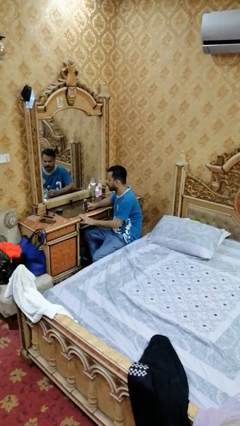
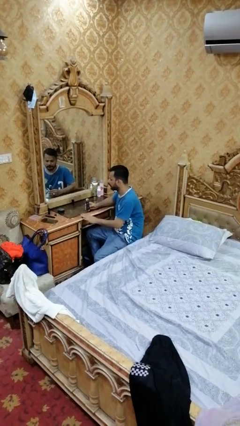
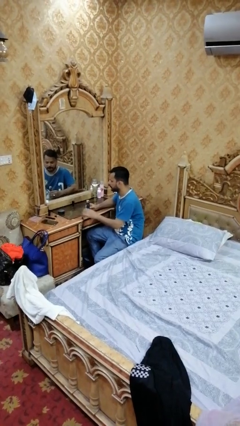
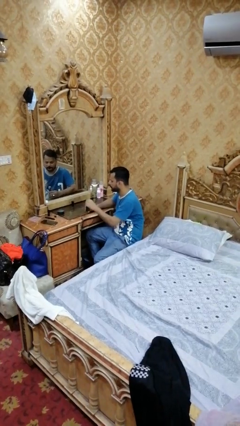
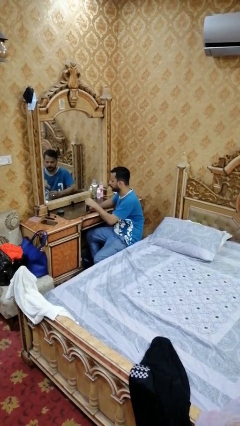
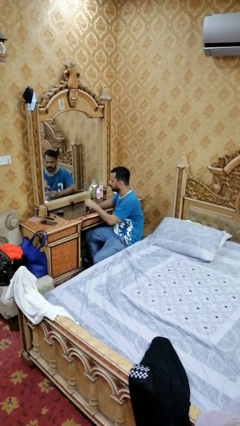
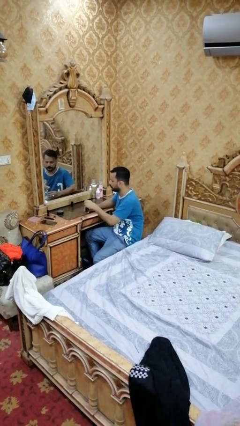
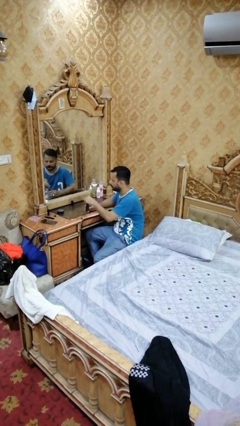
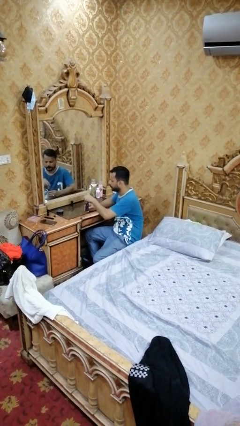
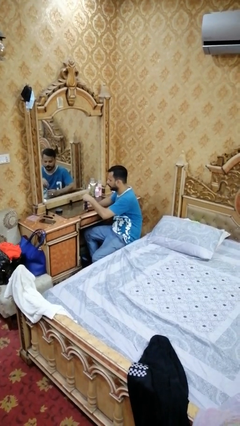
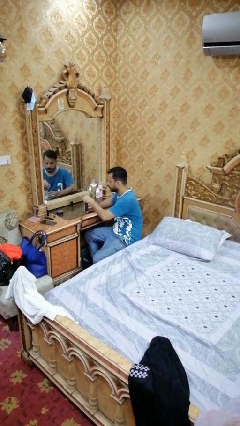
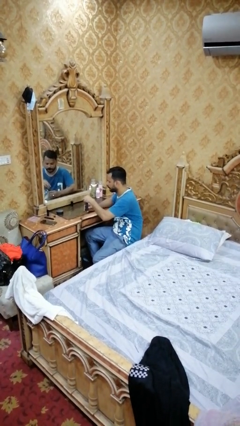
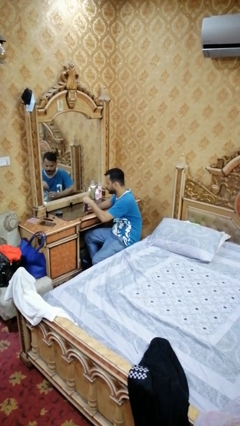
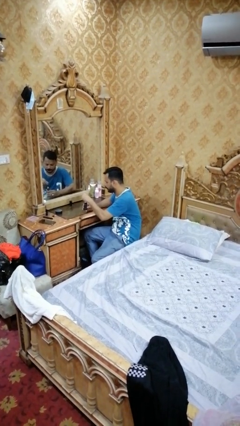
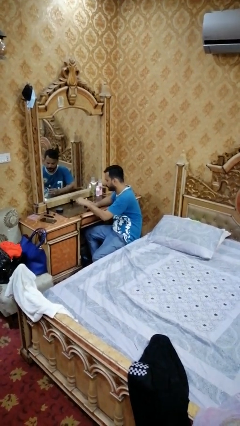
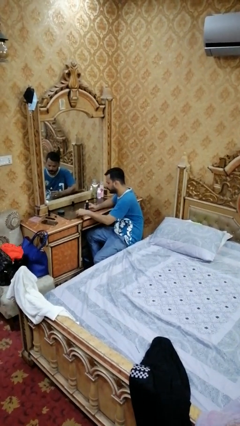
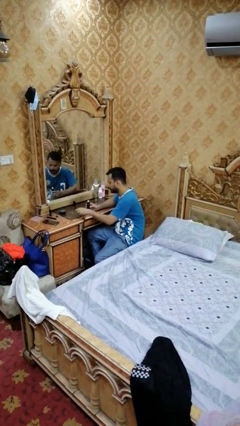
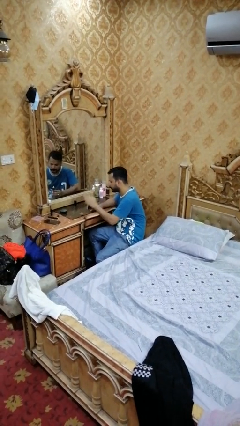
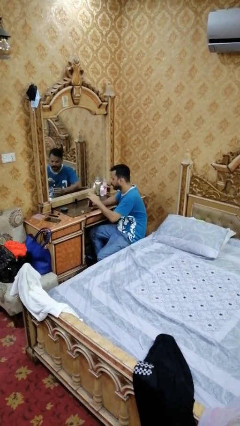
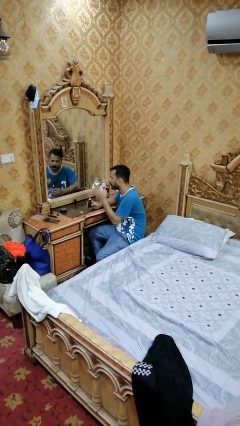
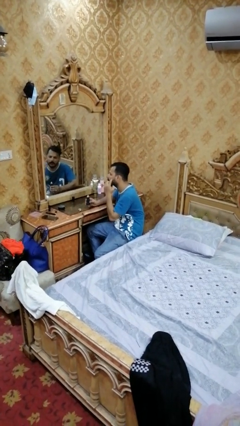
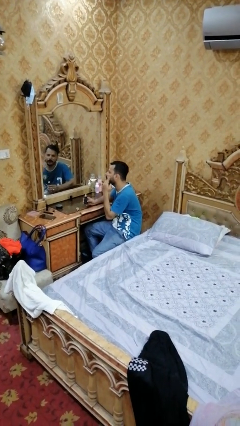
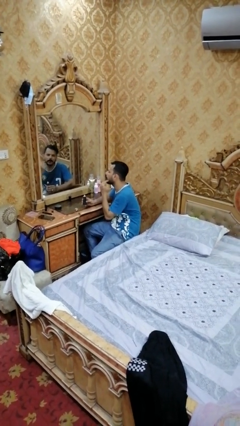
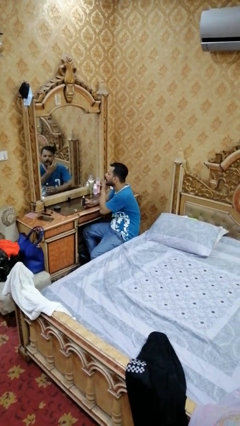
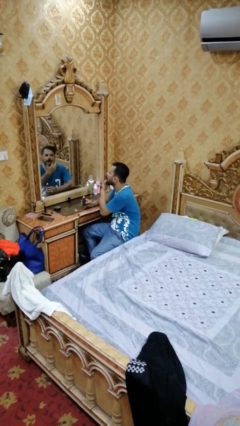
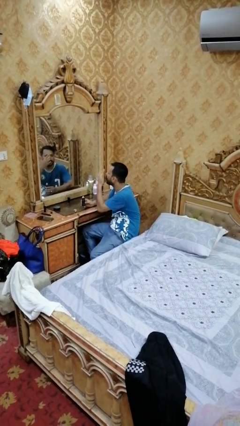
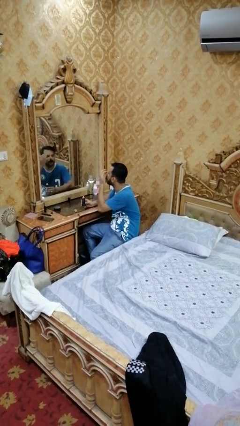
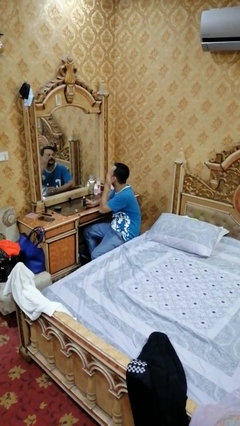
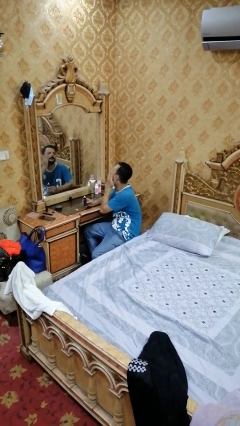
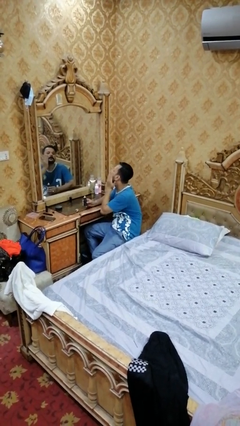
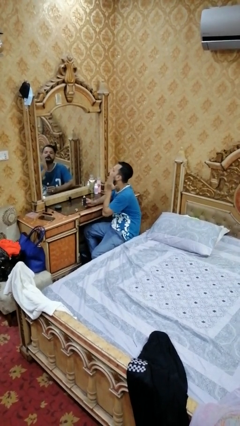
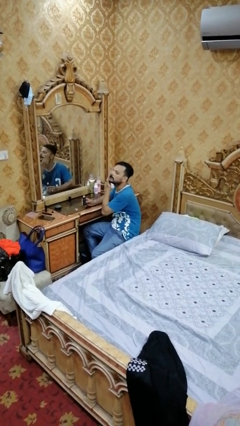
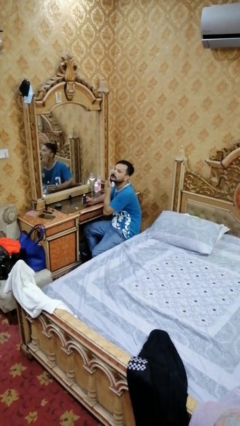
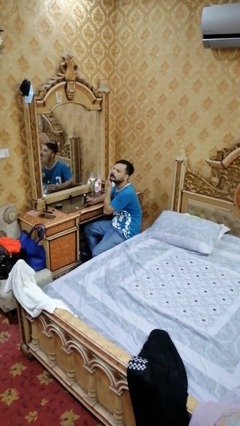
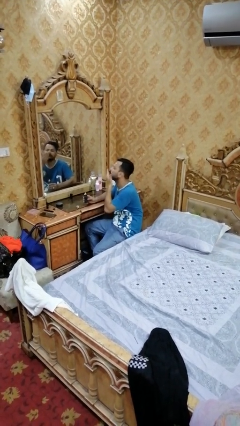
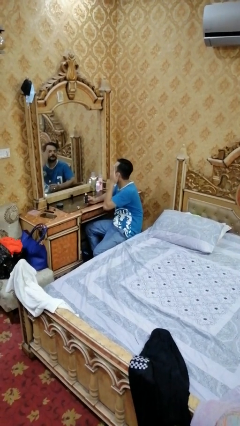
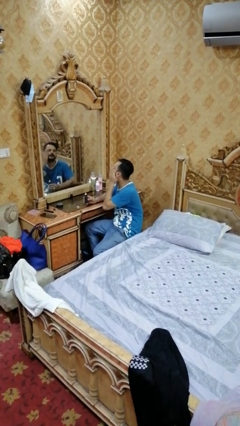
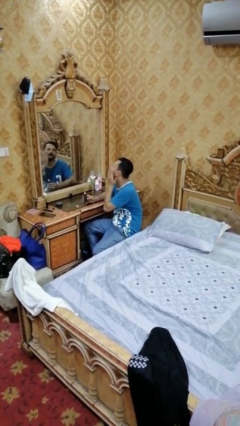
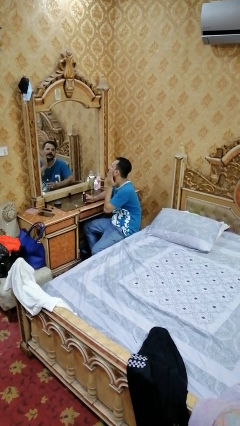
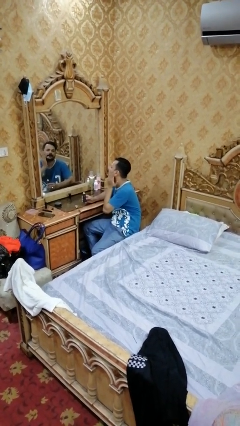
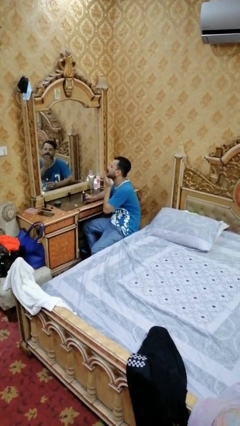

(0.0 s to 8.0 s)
person applies foundation makeup

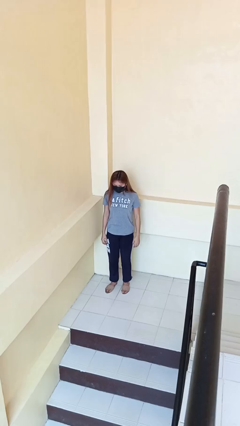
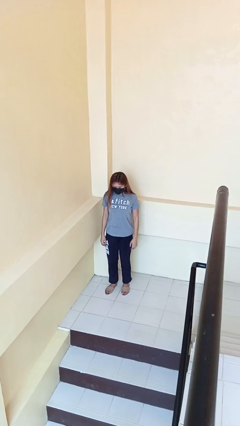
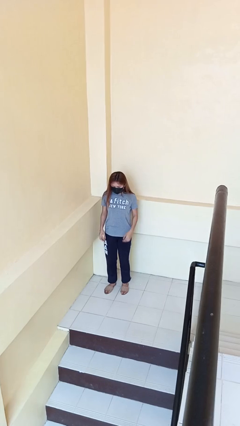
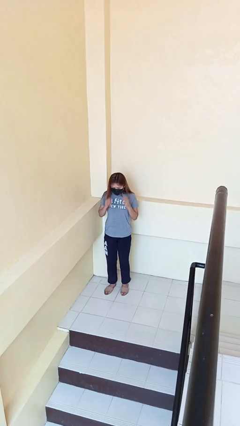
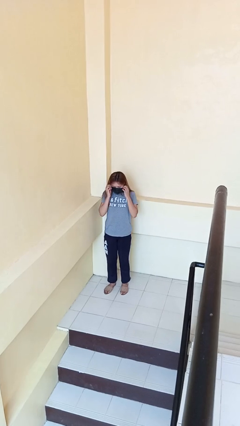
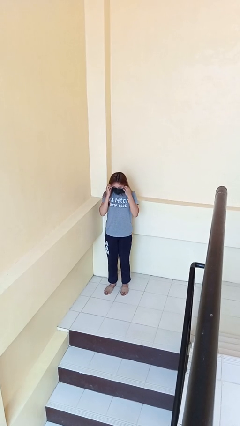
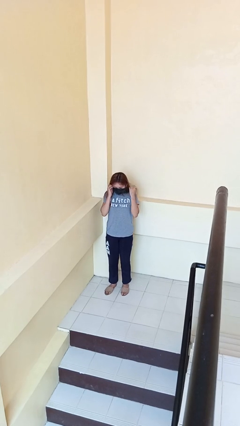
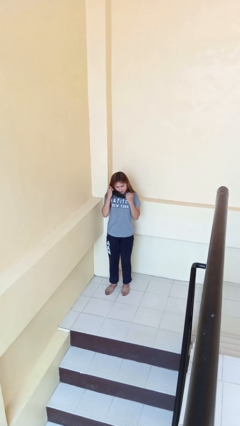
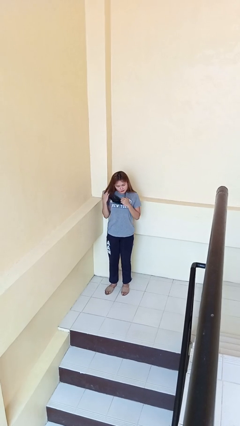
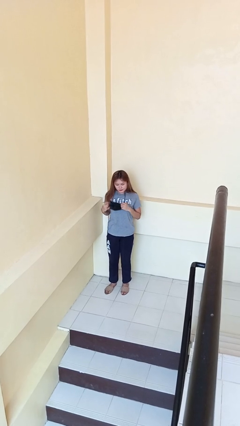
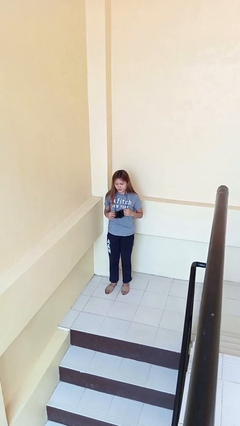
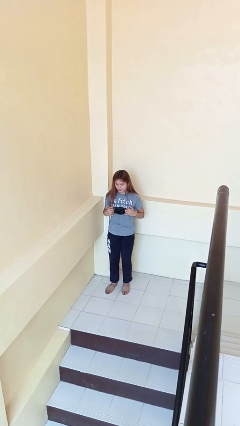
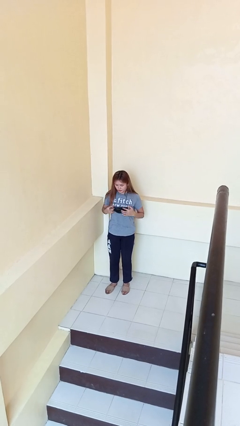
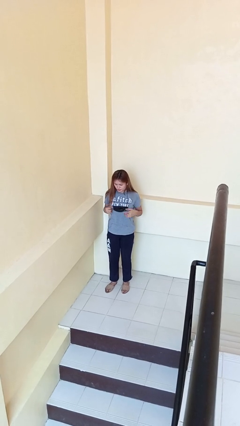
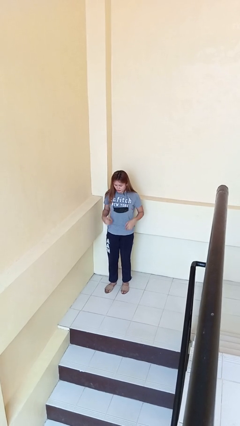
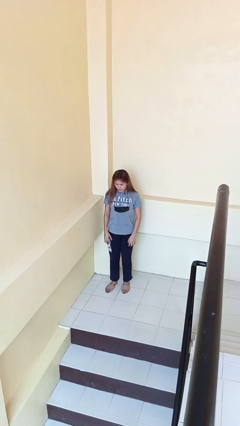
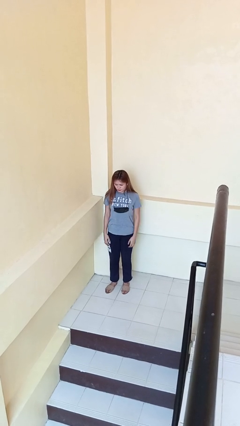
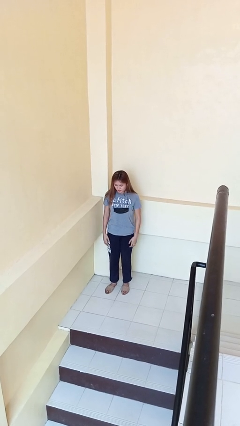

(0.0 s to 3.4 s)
person takes off facemask

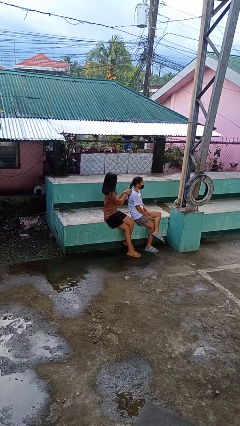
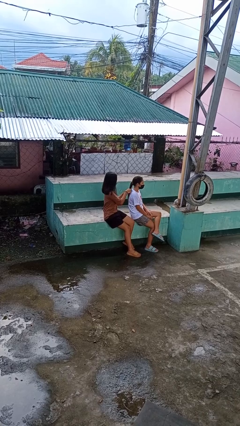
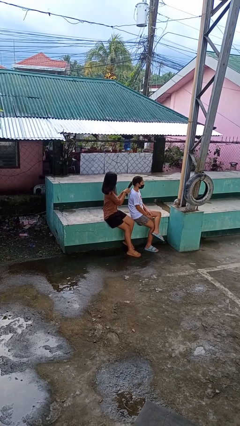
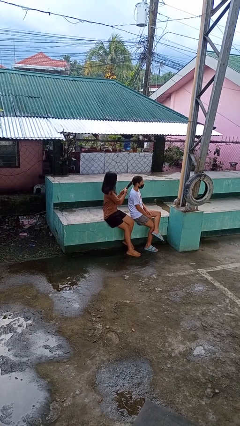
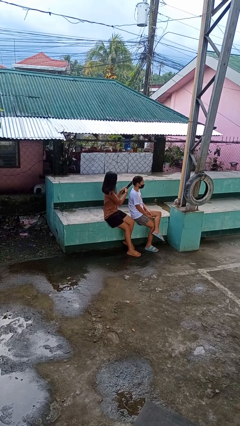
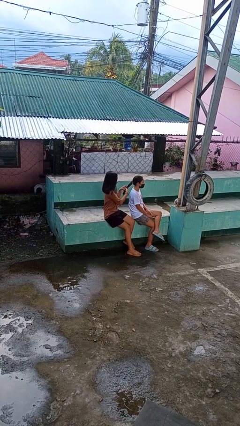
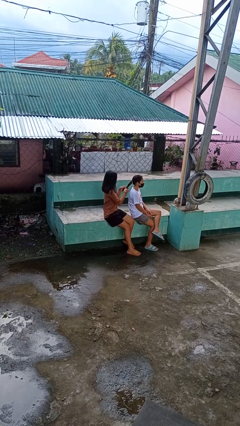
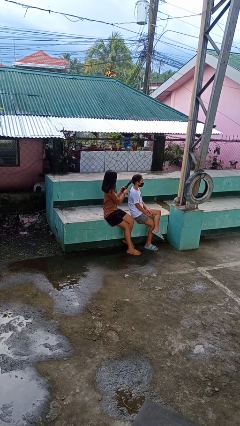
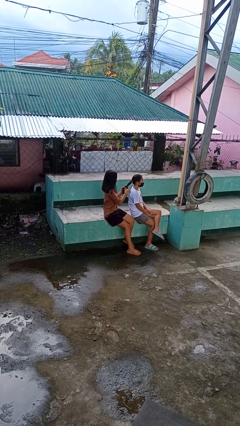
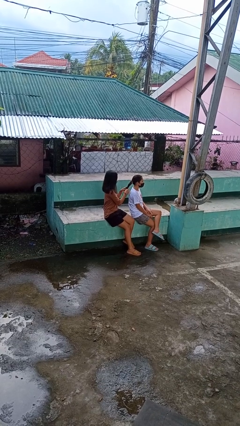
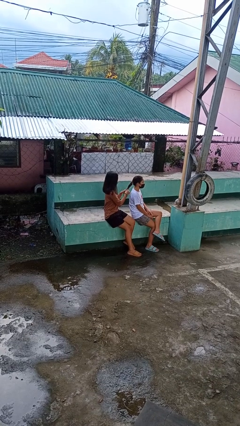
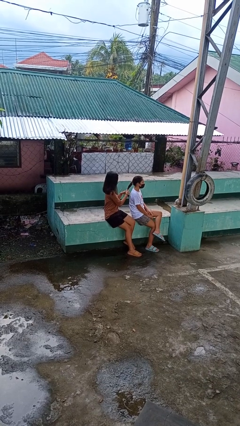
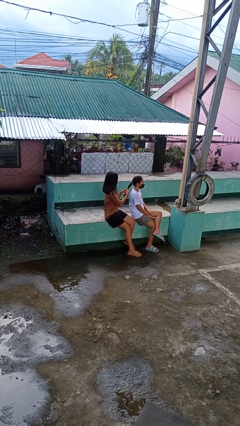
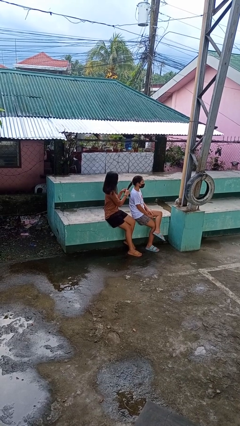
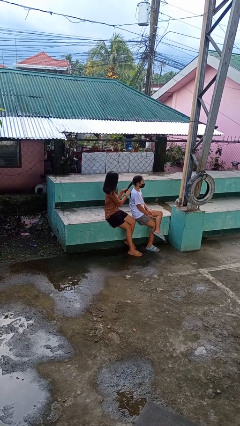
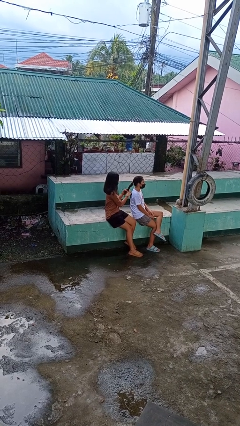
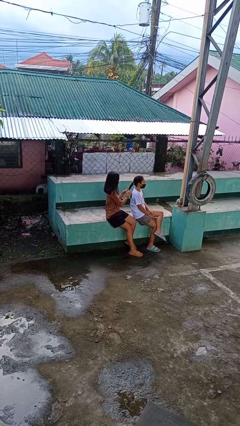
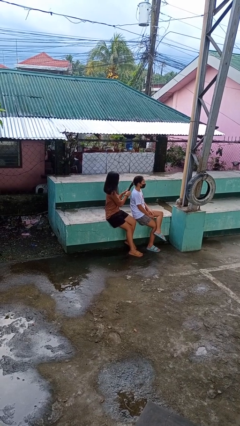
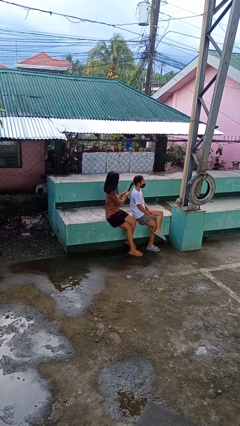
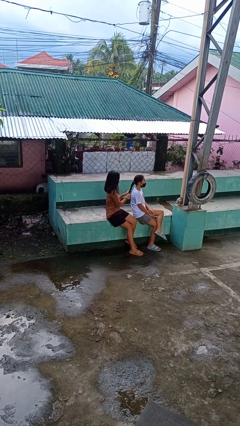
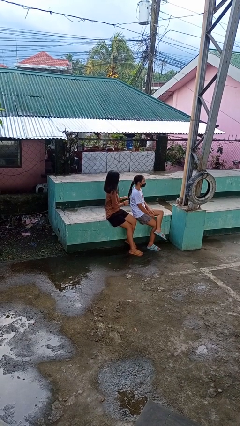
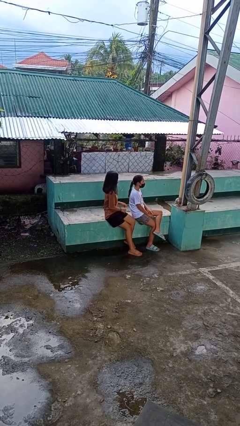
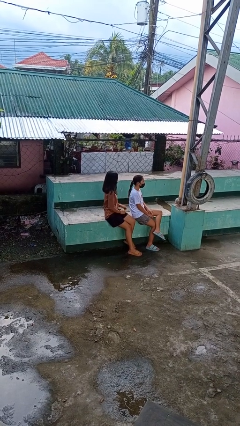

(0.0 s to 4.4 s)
person braids hair of person

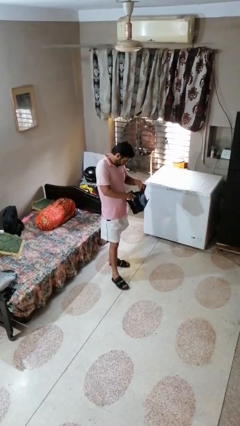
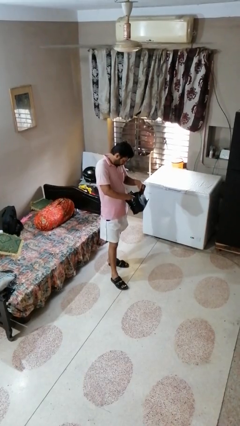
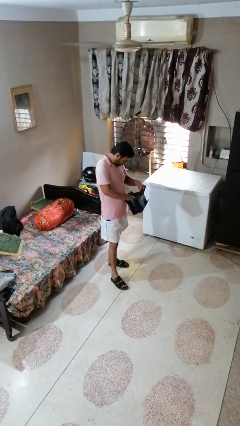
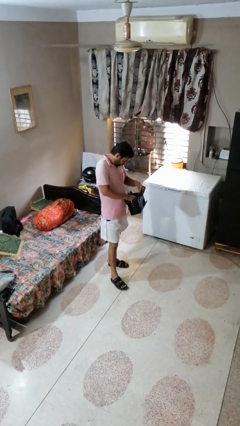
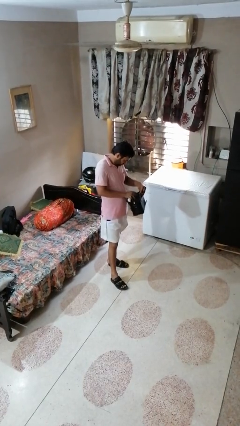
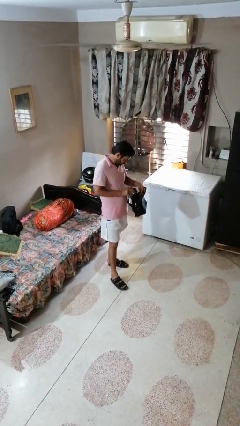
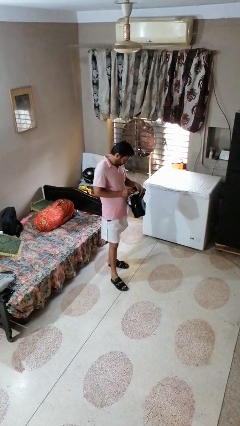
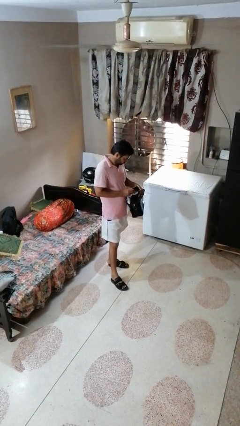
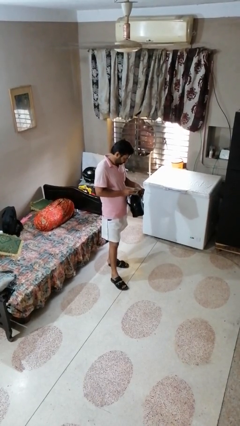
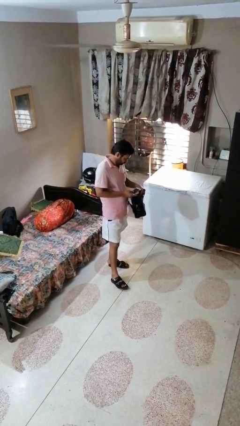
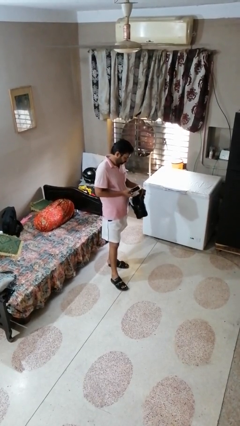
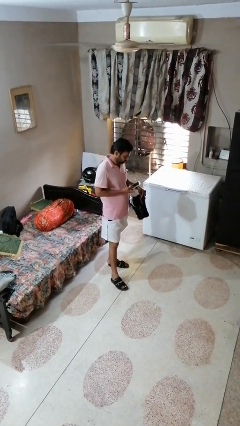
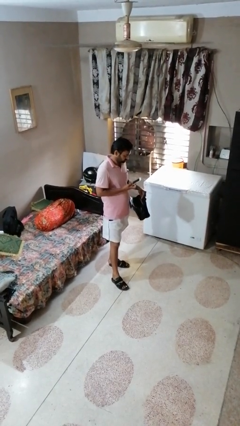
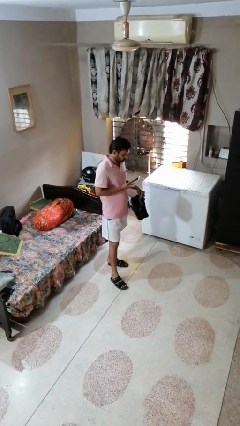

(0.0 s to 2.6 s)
person takes object from purse
